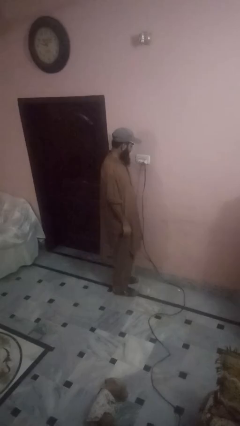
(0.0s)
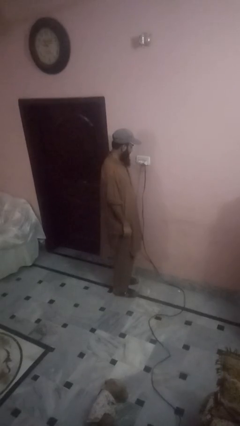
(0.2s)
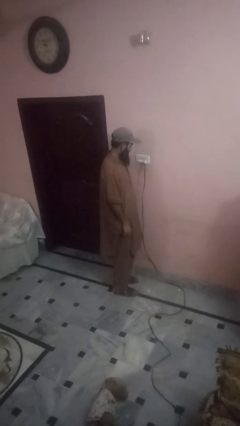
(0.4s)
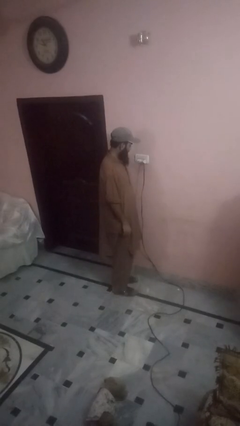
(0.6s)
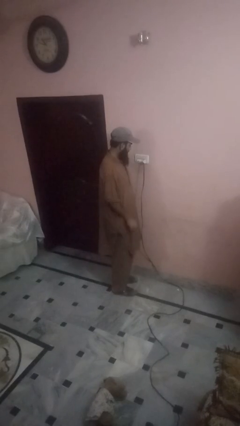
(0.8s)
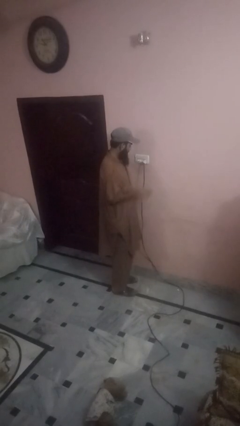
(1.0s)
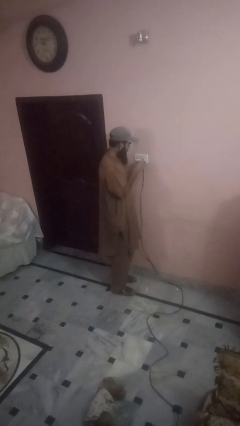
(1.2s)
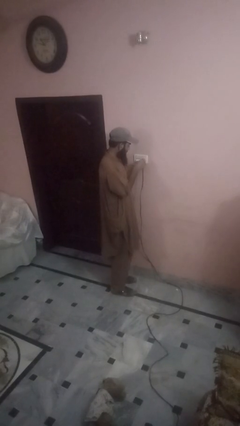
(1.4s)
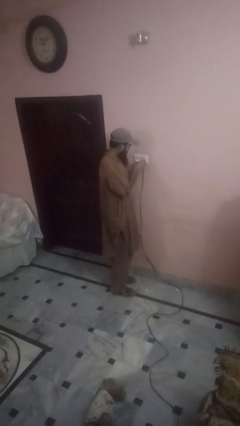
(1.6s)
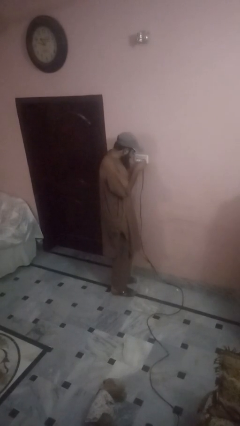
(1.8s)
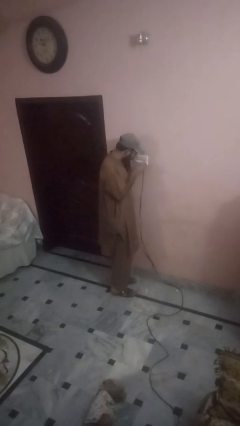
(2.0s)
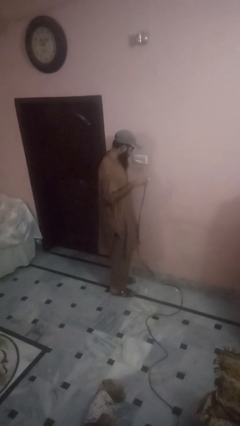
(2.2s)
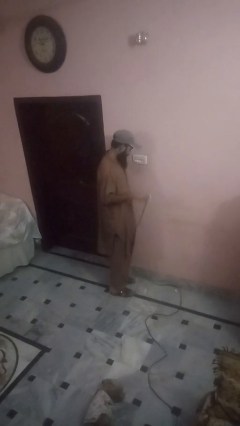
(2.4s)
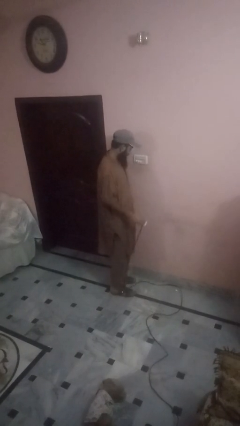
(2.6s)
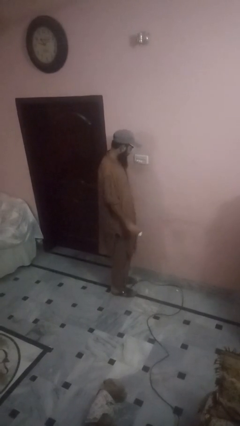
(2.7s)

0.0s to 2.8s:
person unplugs from electrical socket

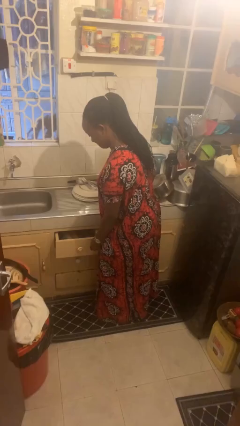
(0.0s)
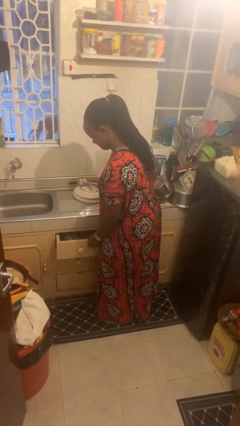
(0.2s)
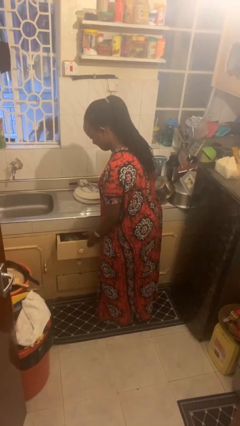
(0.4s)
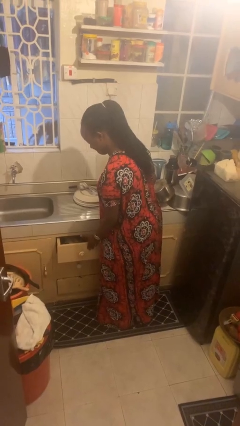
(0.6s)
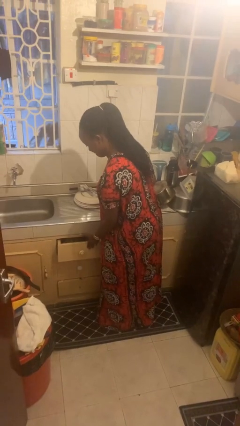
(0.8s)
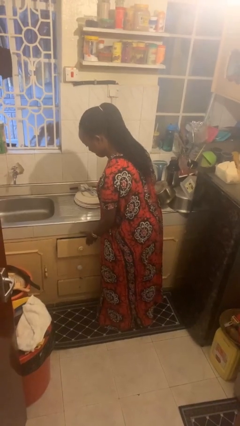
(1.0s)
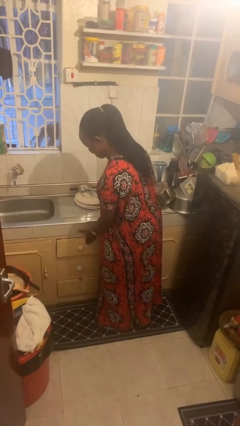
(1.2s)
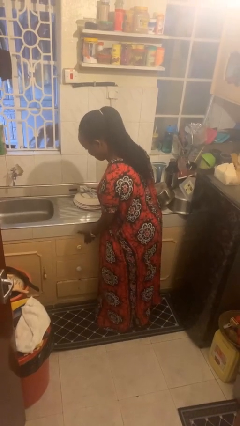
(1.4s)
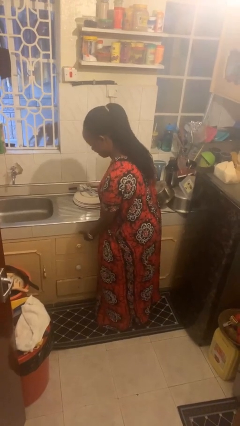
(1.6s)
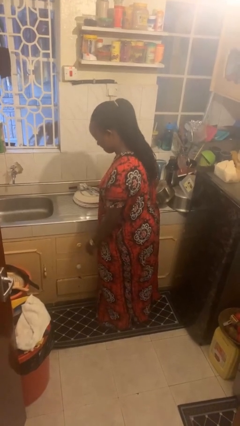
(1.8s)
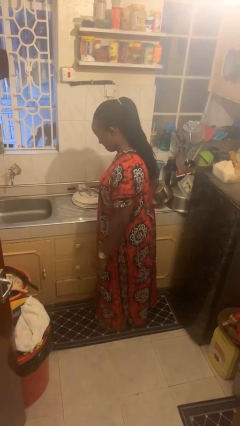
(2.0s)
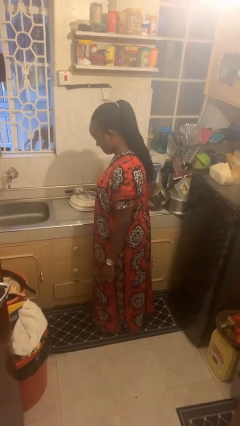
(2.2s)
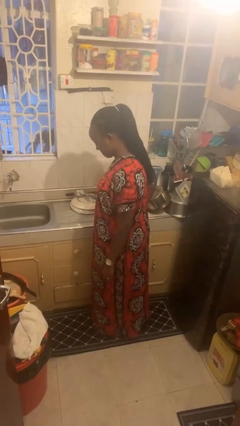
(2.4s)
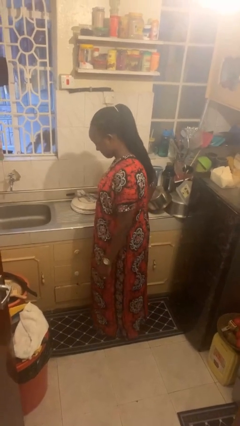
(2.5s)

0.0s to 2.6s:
person closes kitchen drawer

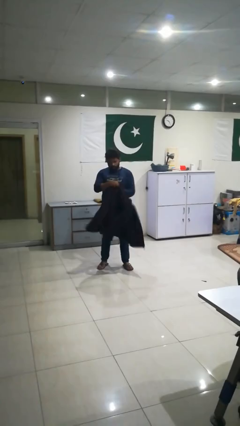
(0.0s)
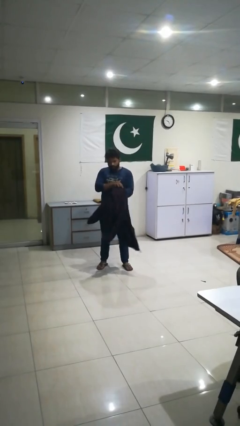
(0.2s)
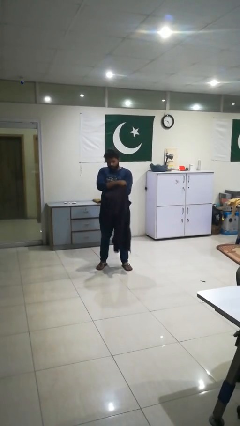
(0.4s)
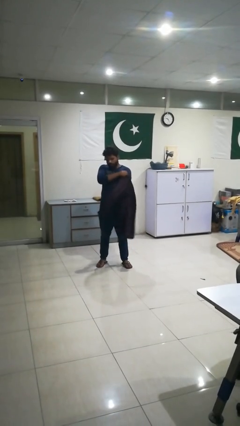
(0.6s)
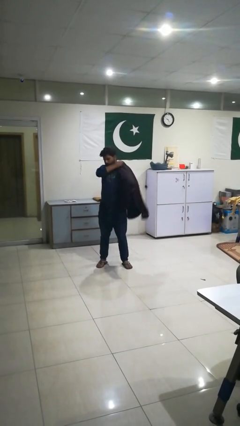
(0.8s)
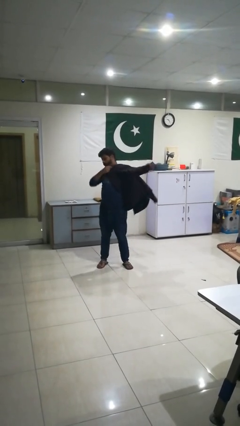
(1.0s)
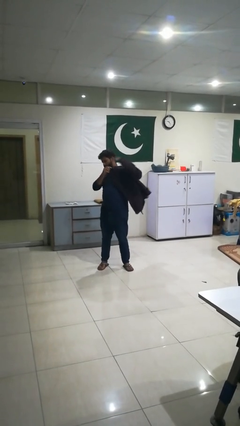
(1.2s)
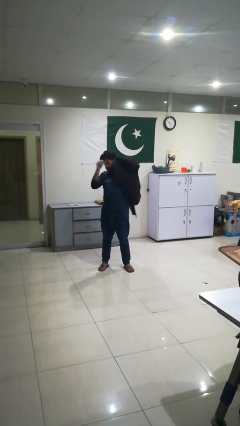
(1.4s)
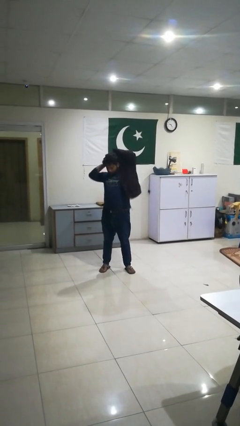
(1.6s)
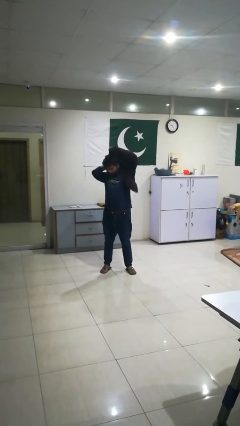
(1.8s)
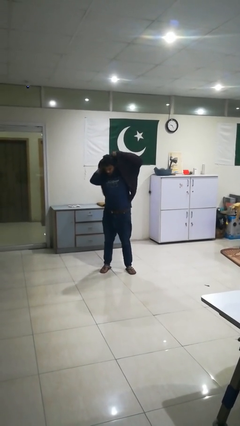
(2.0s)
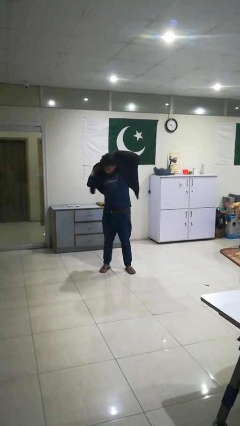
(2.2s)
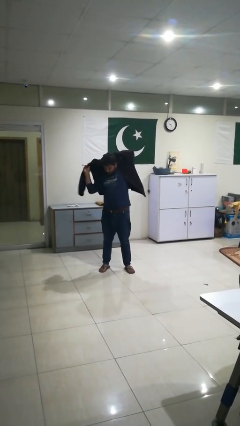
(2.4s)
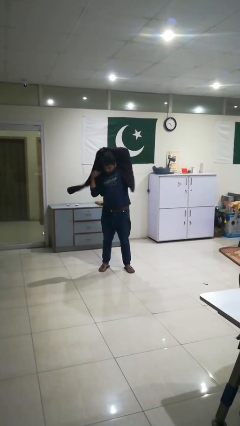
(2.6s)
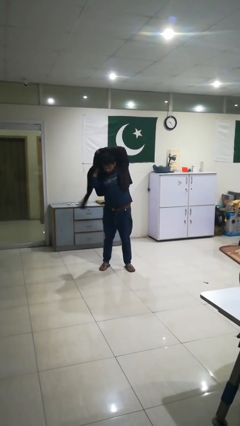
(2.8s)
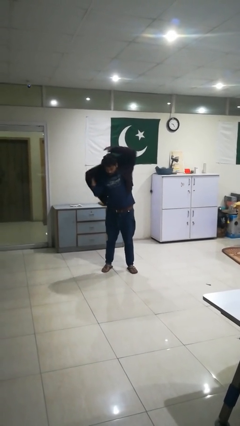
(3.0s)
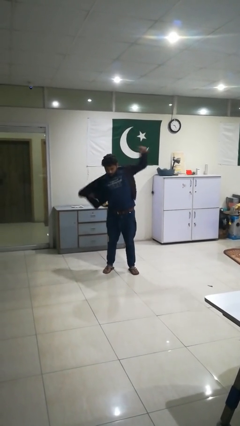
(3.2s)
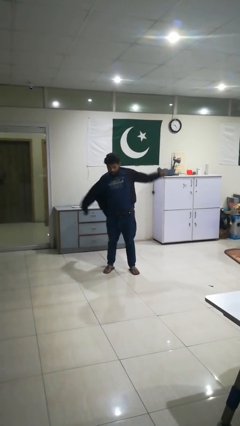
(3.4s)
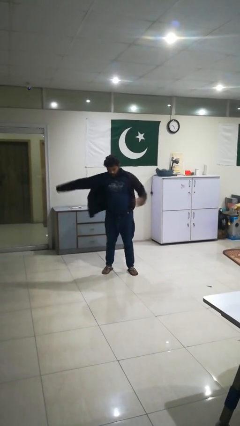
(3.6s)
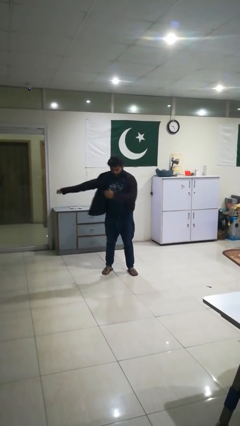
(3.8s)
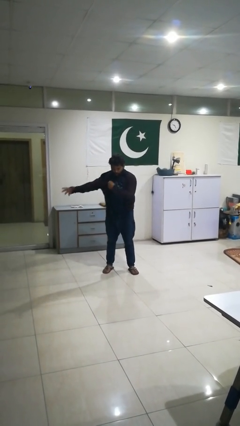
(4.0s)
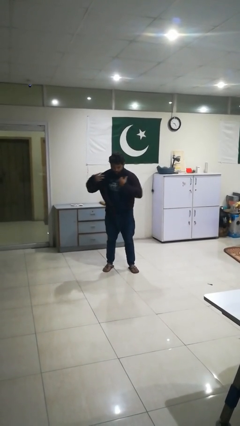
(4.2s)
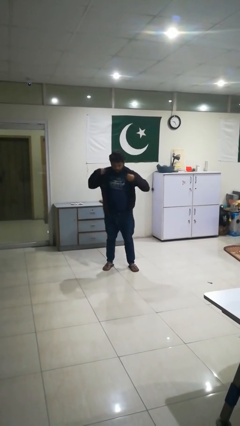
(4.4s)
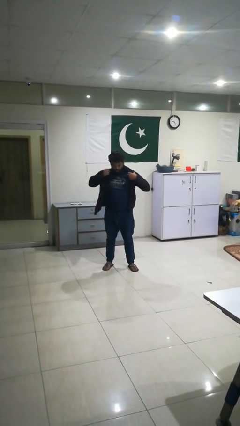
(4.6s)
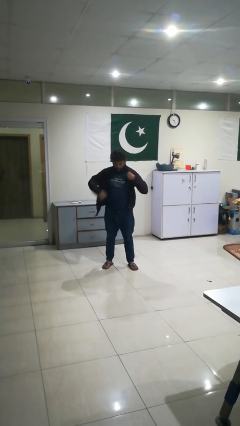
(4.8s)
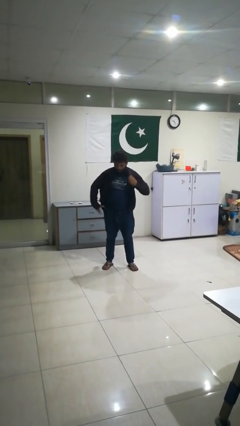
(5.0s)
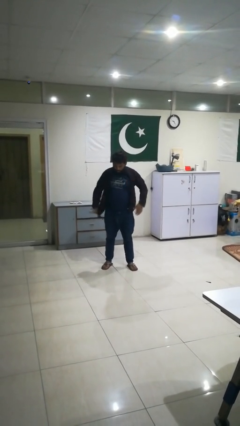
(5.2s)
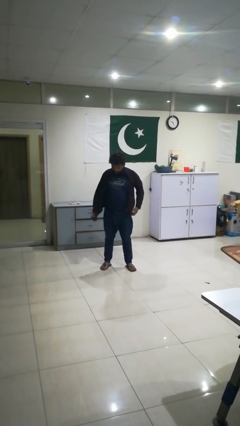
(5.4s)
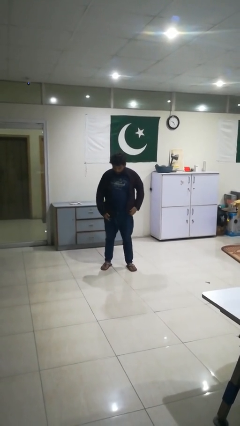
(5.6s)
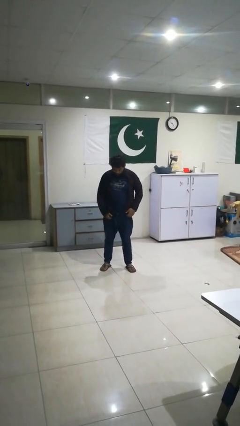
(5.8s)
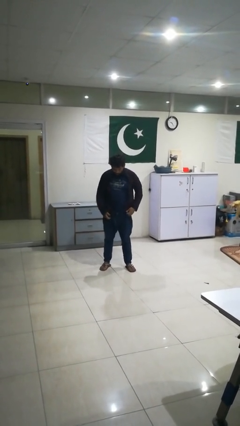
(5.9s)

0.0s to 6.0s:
person puts on jacket

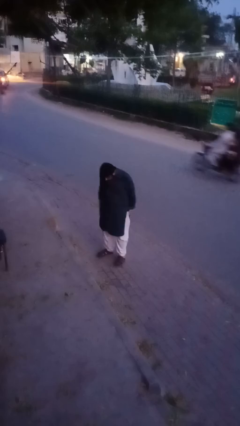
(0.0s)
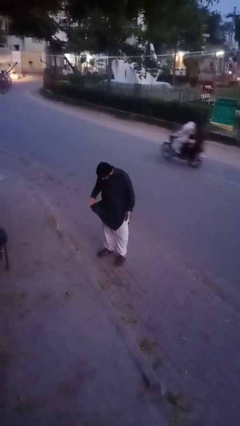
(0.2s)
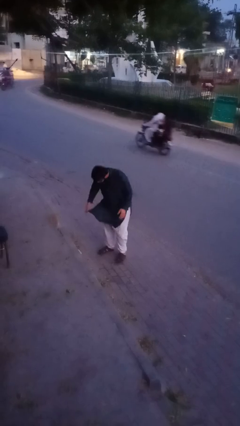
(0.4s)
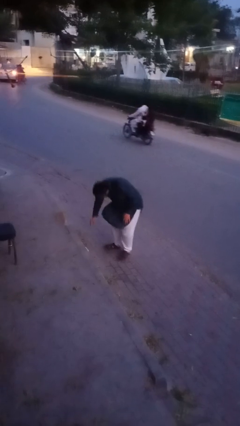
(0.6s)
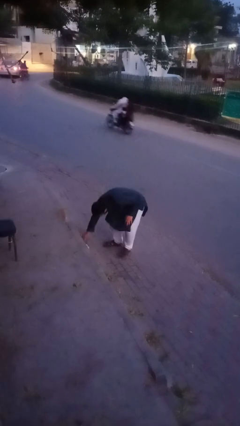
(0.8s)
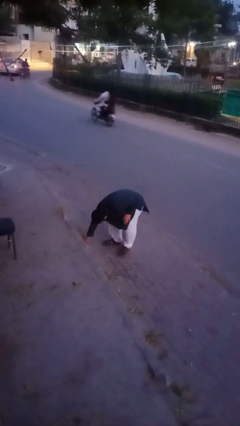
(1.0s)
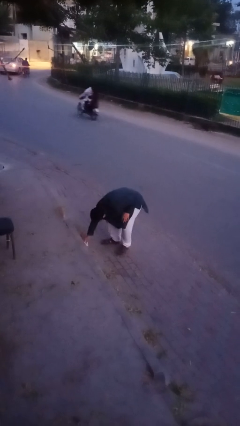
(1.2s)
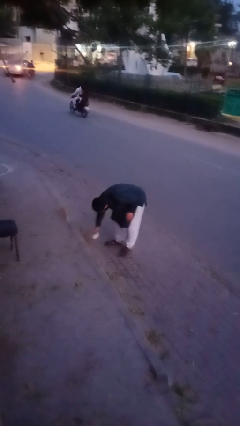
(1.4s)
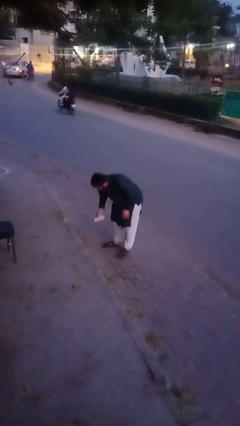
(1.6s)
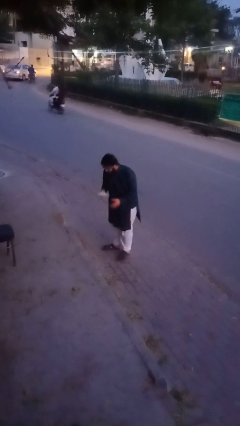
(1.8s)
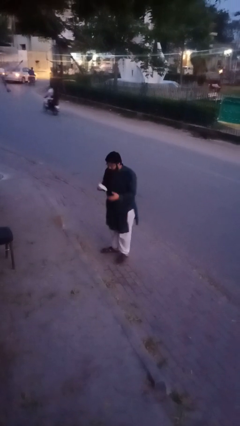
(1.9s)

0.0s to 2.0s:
person picks up object from floor

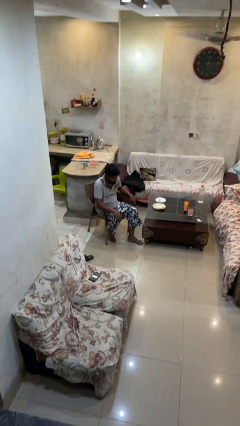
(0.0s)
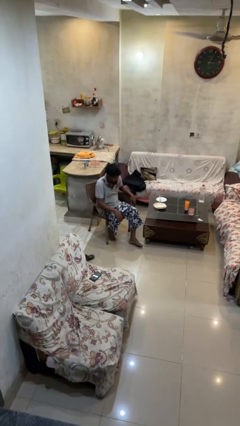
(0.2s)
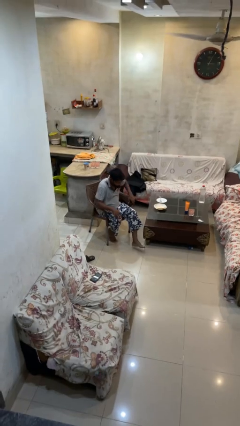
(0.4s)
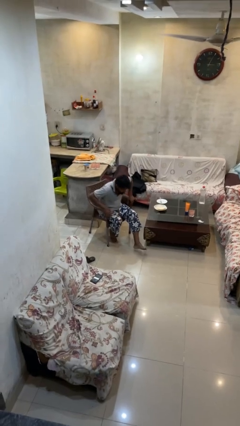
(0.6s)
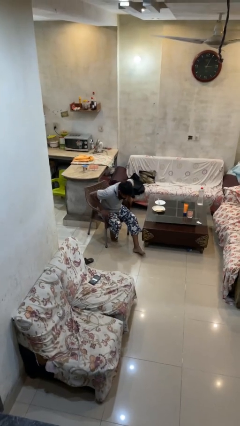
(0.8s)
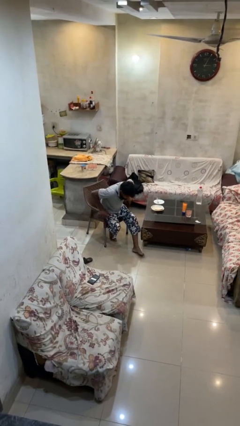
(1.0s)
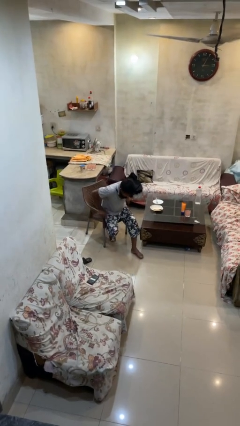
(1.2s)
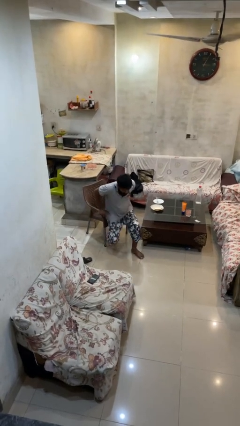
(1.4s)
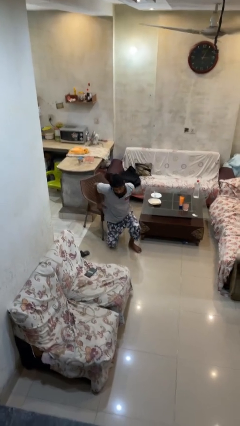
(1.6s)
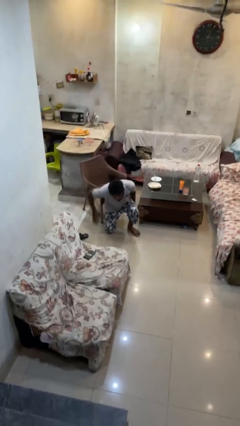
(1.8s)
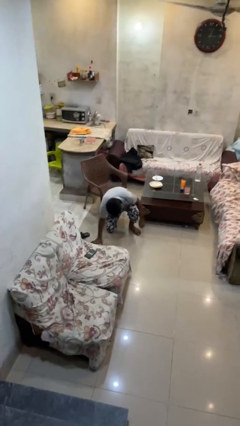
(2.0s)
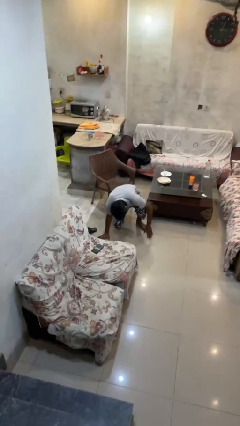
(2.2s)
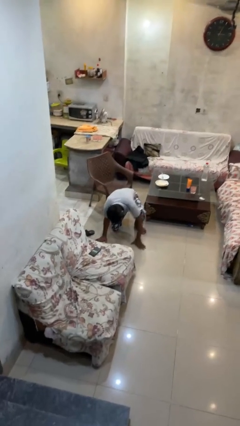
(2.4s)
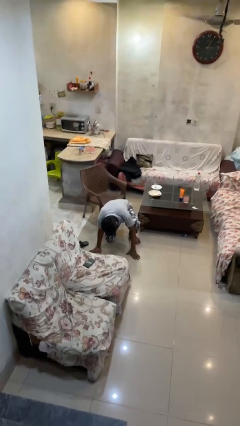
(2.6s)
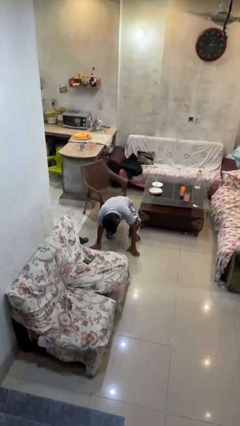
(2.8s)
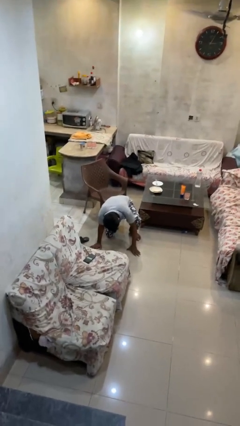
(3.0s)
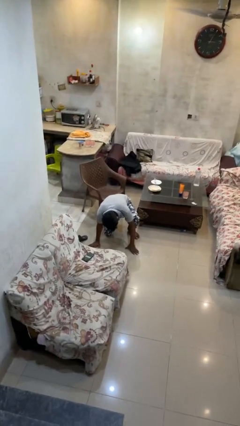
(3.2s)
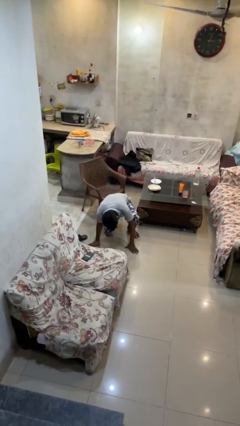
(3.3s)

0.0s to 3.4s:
person falls from chair

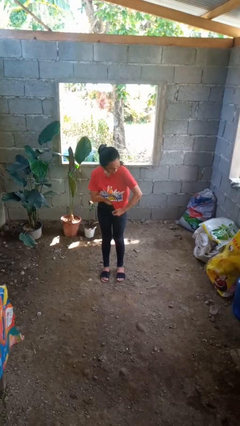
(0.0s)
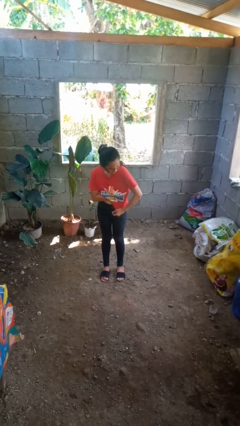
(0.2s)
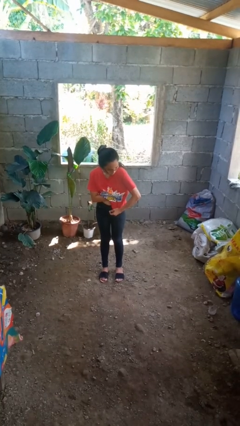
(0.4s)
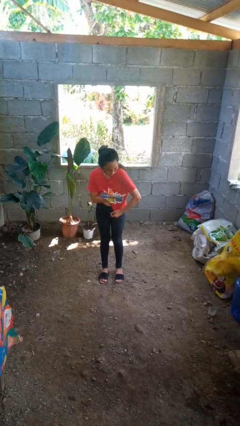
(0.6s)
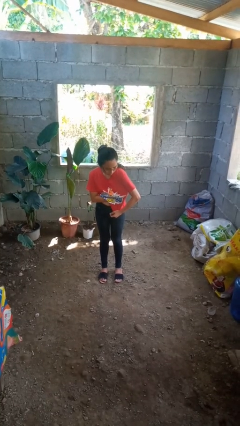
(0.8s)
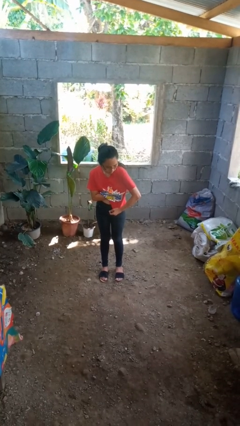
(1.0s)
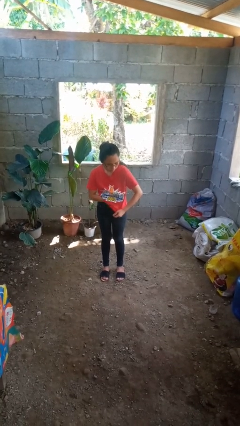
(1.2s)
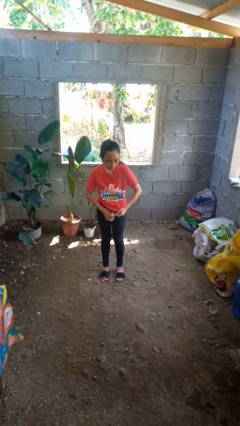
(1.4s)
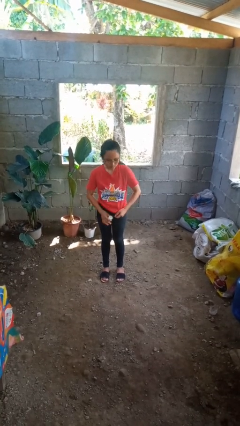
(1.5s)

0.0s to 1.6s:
person applies deodorant
